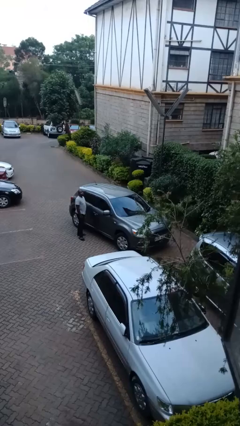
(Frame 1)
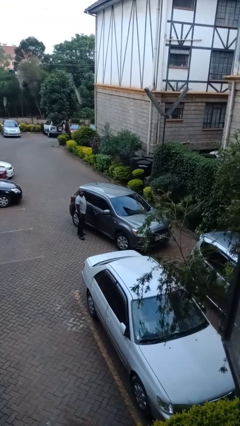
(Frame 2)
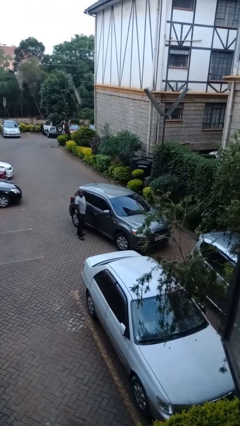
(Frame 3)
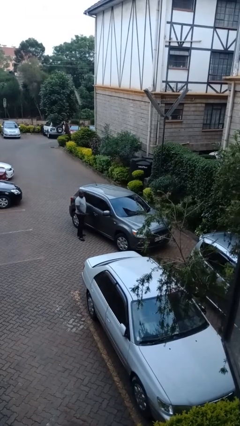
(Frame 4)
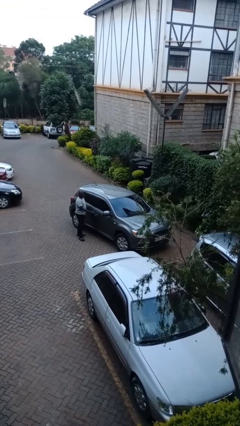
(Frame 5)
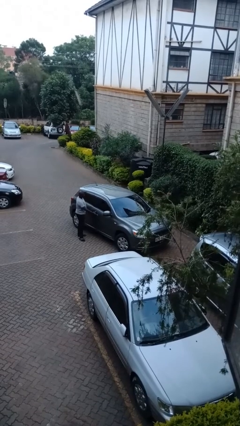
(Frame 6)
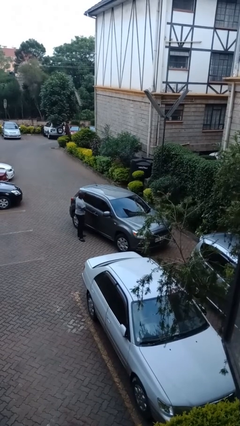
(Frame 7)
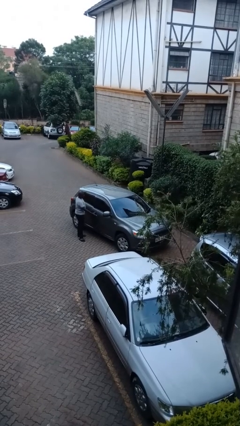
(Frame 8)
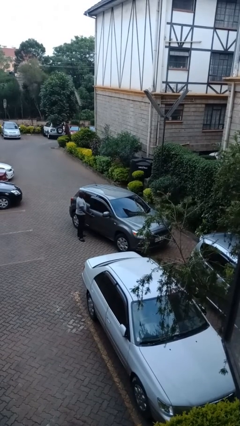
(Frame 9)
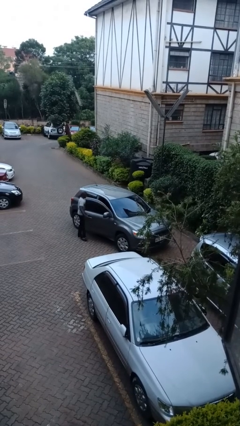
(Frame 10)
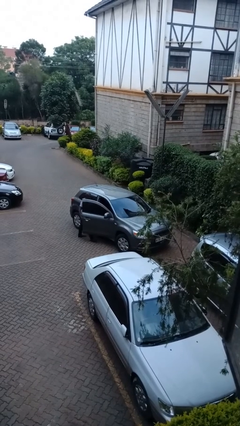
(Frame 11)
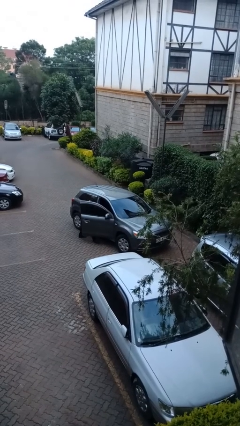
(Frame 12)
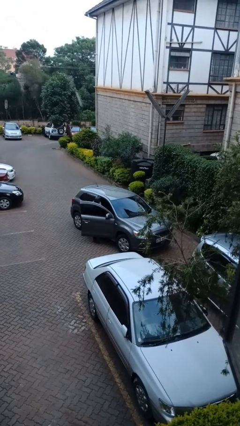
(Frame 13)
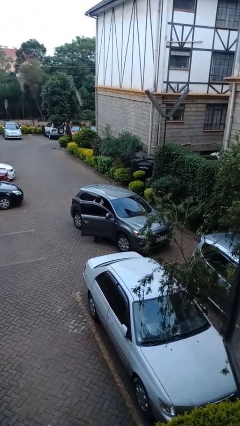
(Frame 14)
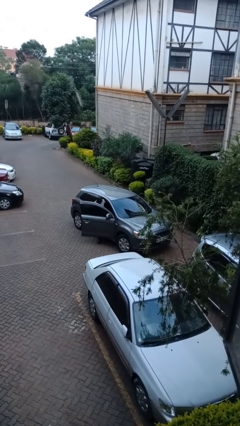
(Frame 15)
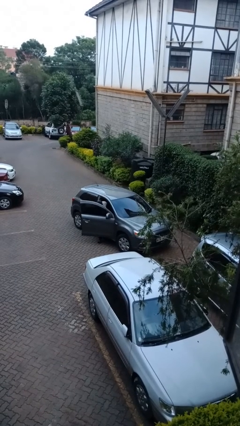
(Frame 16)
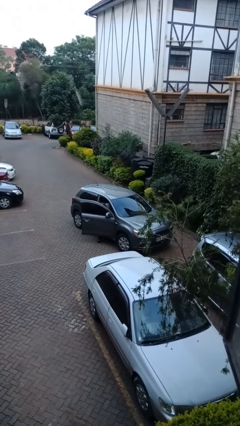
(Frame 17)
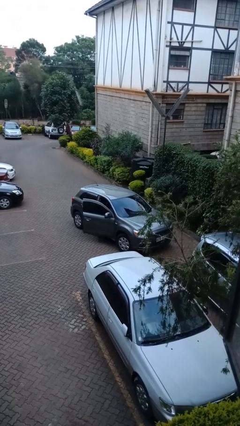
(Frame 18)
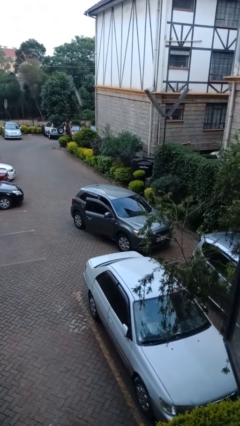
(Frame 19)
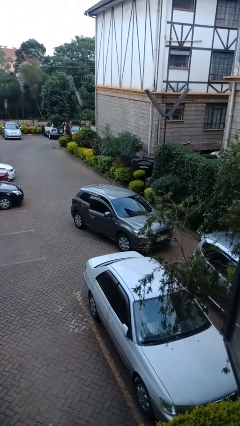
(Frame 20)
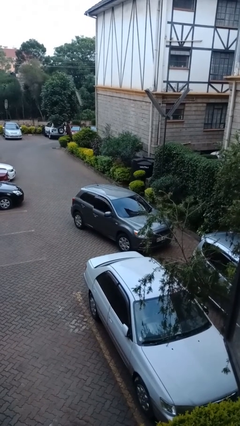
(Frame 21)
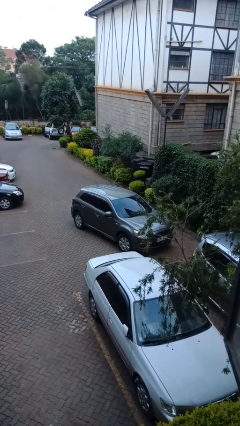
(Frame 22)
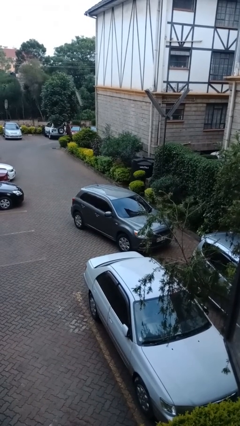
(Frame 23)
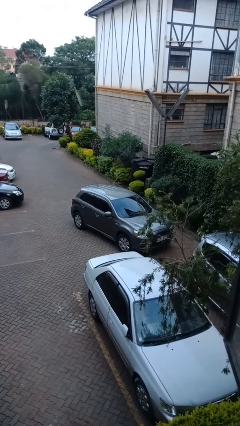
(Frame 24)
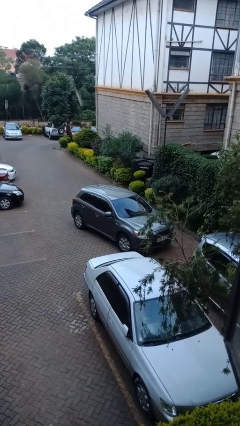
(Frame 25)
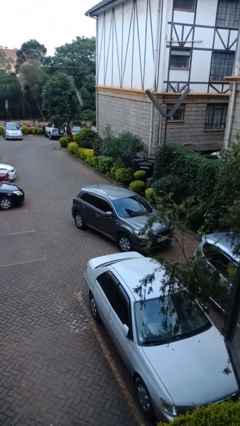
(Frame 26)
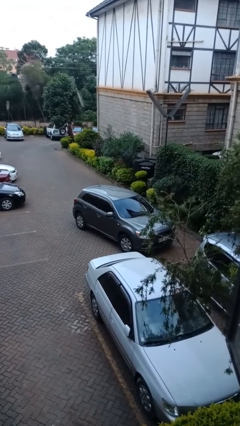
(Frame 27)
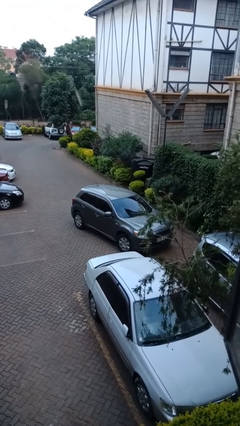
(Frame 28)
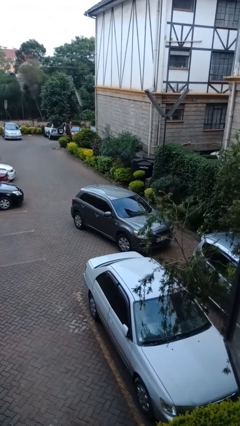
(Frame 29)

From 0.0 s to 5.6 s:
car picks up person

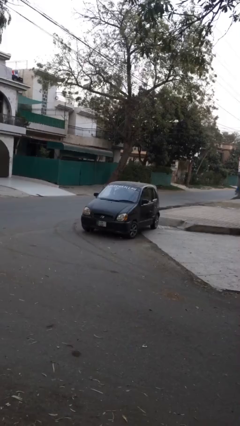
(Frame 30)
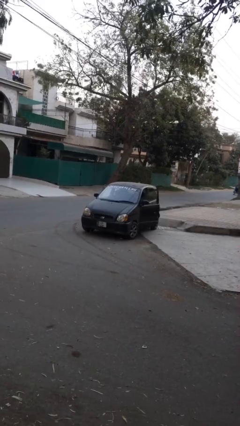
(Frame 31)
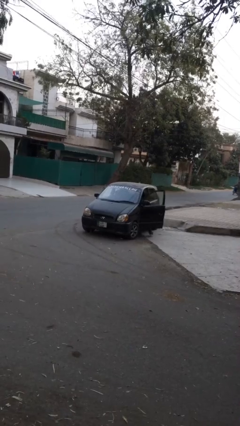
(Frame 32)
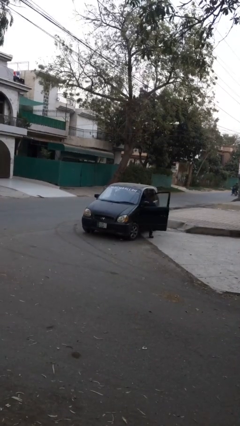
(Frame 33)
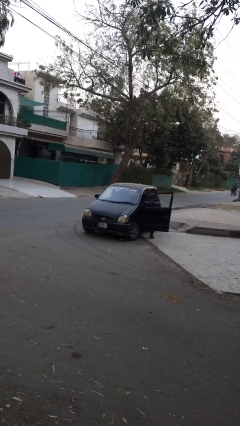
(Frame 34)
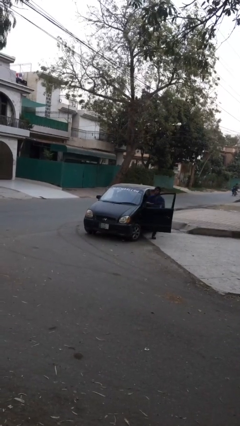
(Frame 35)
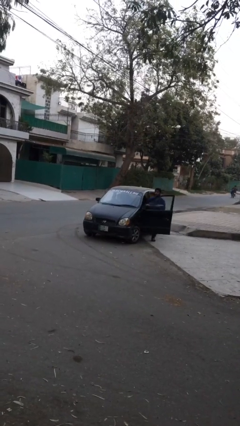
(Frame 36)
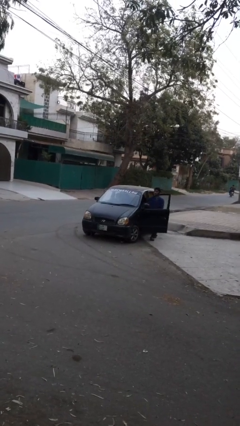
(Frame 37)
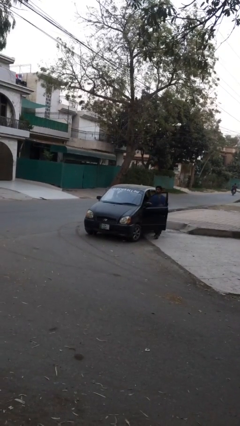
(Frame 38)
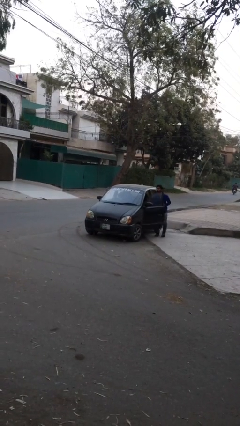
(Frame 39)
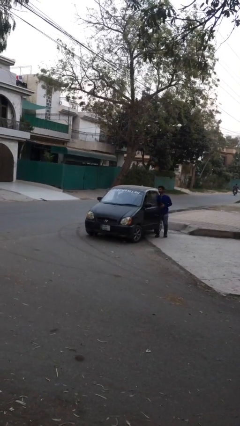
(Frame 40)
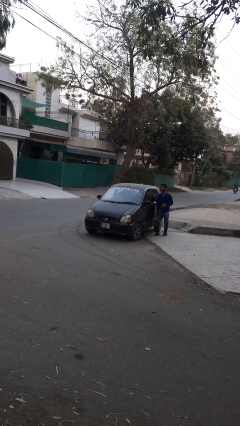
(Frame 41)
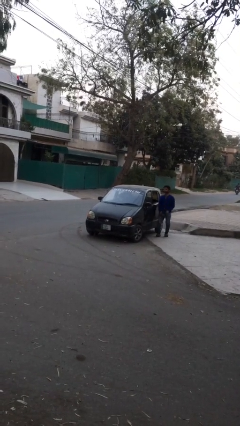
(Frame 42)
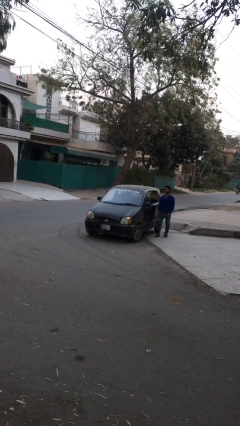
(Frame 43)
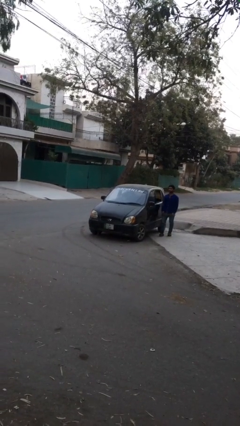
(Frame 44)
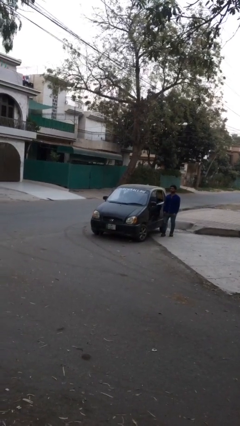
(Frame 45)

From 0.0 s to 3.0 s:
car drops off person

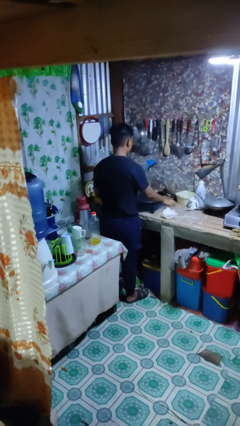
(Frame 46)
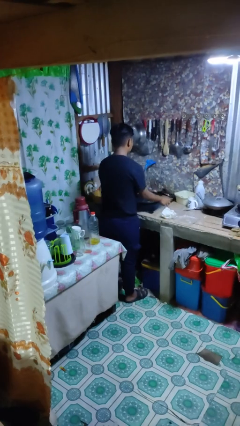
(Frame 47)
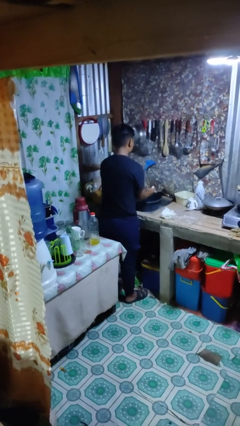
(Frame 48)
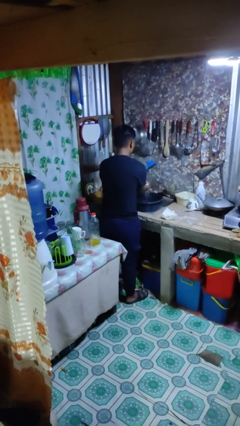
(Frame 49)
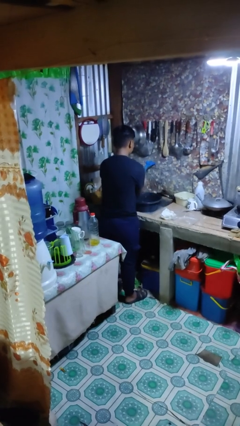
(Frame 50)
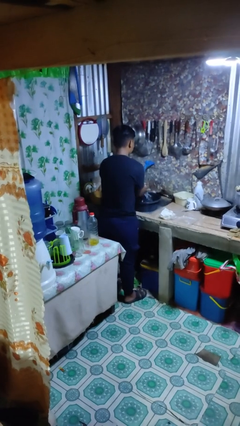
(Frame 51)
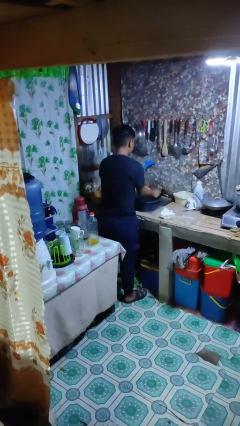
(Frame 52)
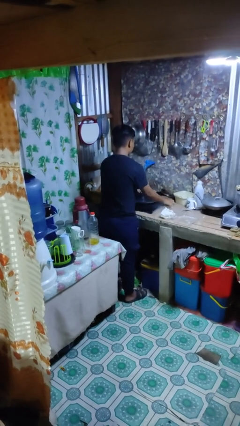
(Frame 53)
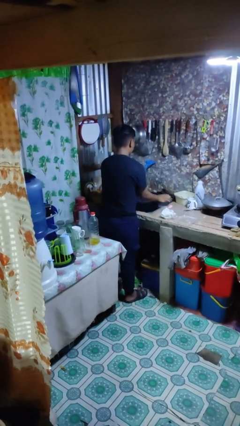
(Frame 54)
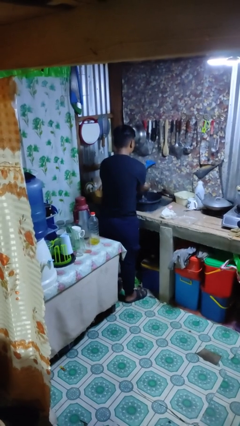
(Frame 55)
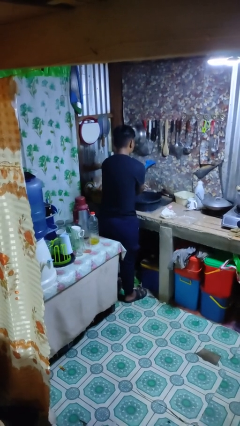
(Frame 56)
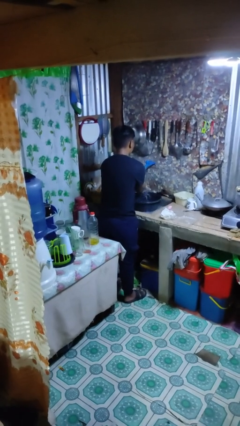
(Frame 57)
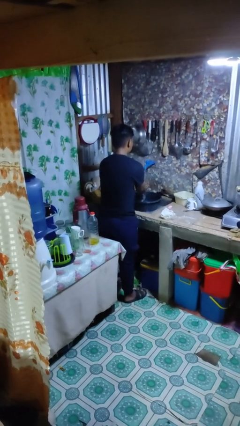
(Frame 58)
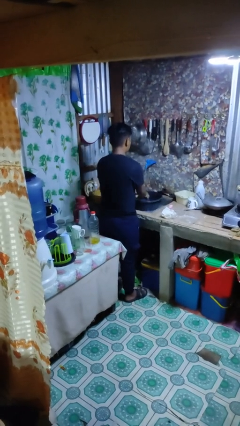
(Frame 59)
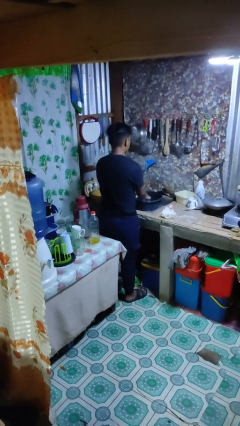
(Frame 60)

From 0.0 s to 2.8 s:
person washes hands

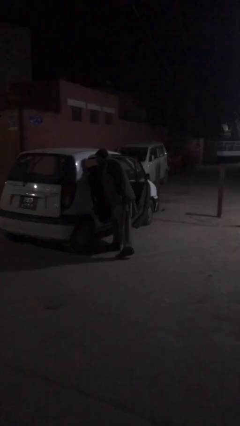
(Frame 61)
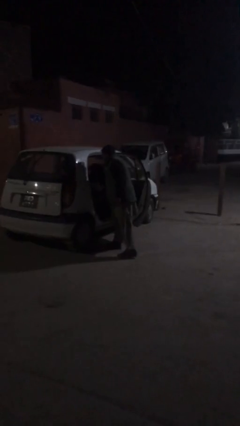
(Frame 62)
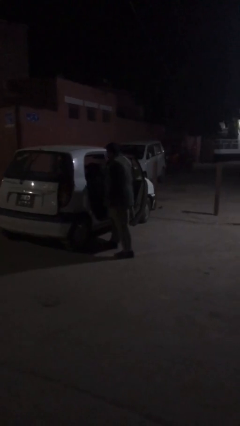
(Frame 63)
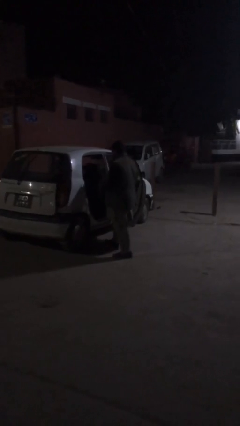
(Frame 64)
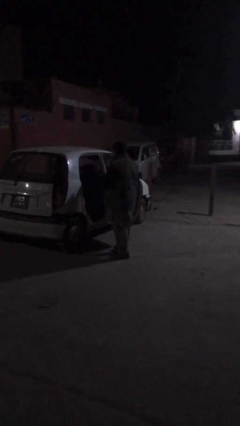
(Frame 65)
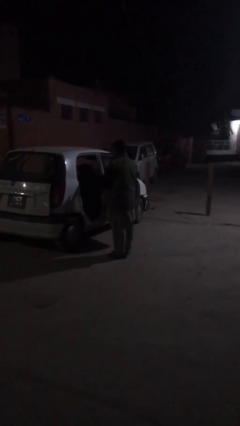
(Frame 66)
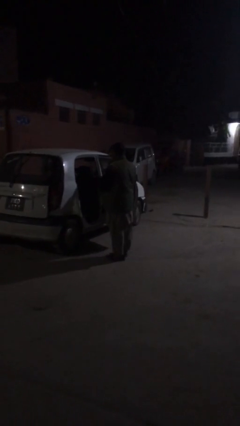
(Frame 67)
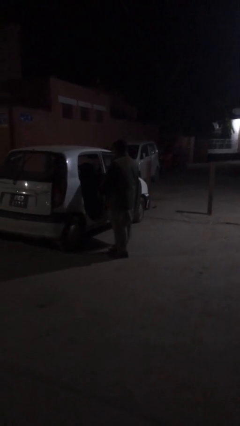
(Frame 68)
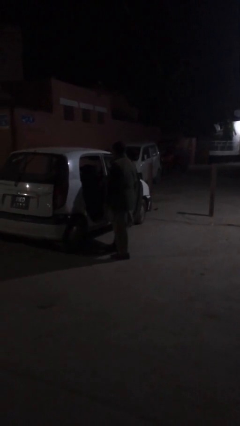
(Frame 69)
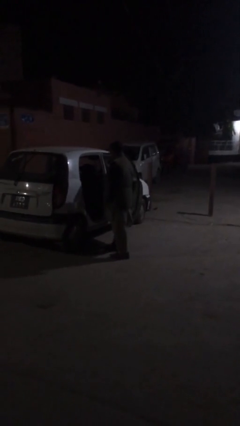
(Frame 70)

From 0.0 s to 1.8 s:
person unloads car

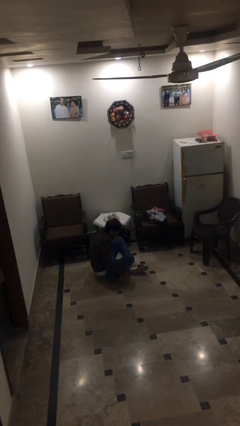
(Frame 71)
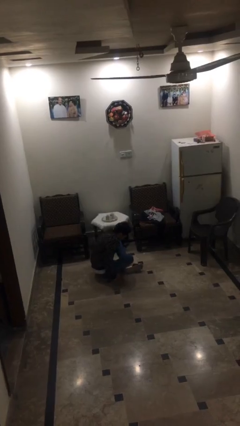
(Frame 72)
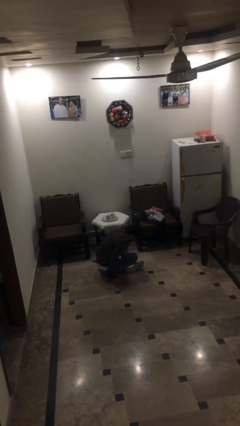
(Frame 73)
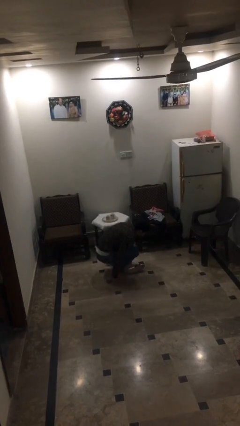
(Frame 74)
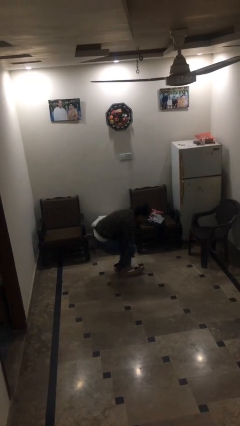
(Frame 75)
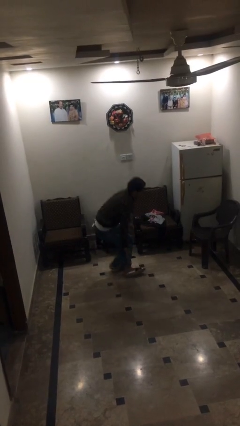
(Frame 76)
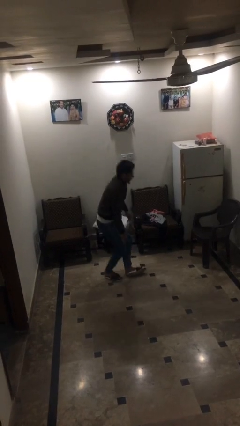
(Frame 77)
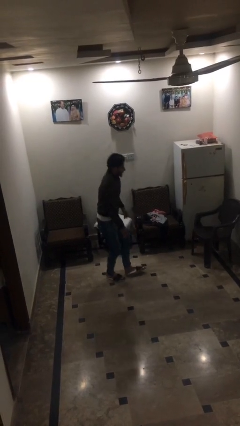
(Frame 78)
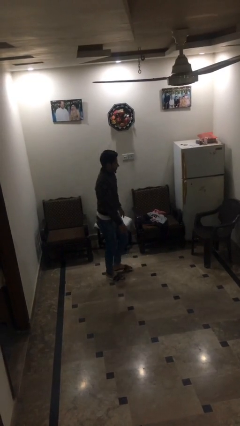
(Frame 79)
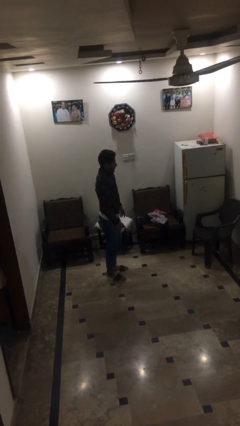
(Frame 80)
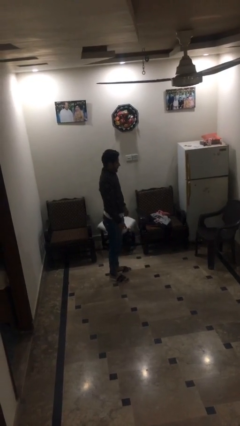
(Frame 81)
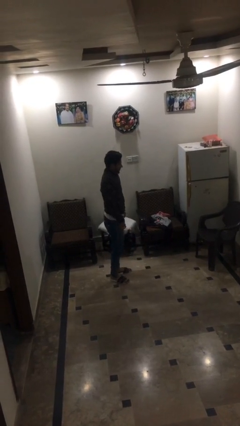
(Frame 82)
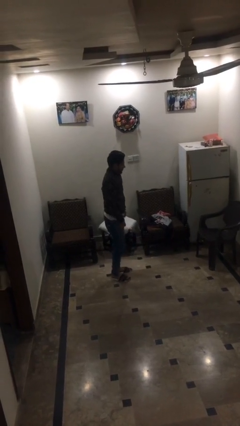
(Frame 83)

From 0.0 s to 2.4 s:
person stands up

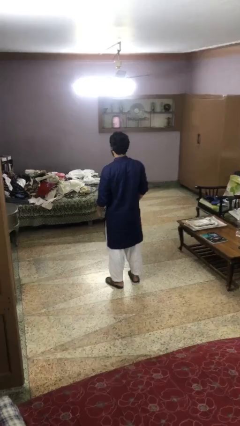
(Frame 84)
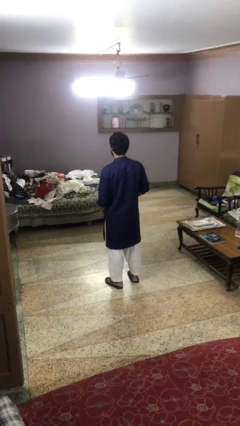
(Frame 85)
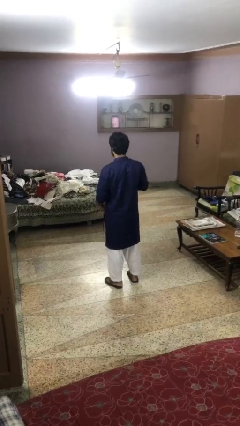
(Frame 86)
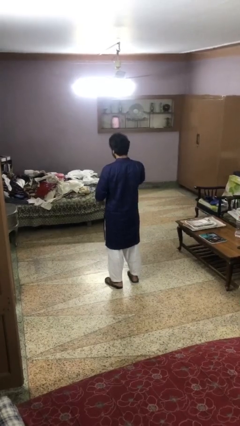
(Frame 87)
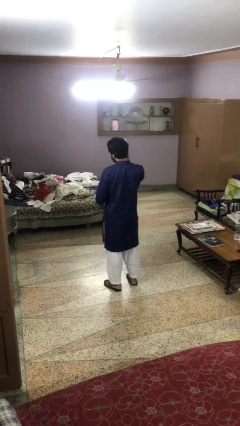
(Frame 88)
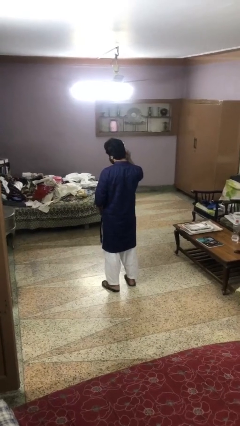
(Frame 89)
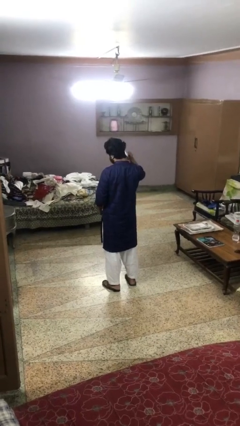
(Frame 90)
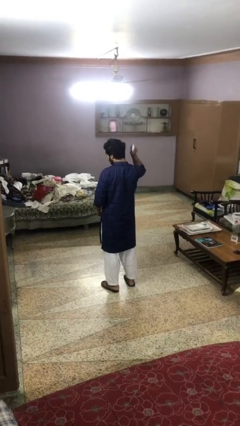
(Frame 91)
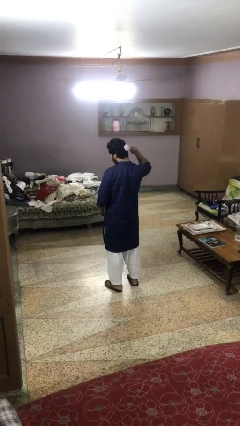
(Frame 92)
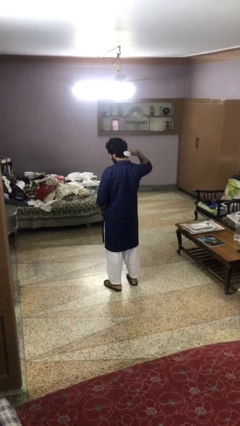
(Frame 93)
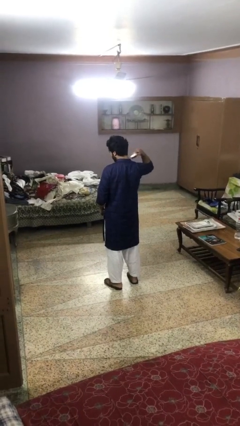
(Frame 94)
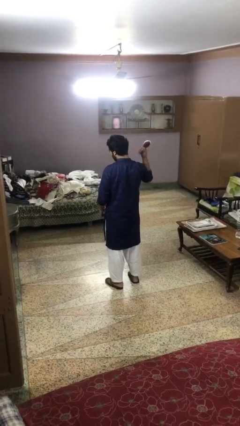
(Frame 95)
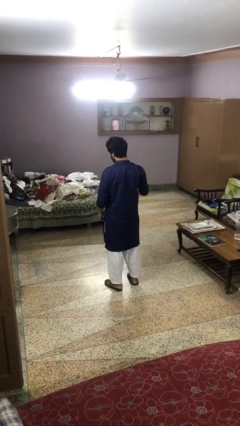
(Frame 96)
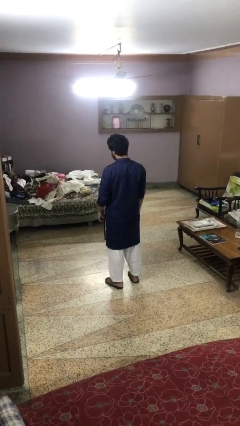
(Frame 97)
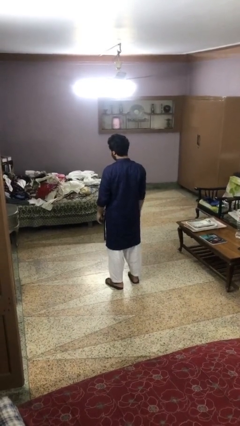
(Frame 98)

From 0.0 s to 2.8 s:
person brushes hair
